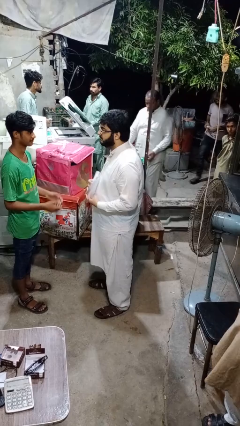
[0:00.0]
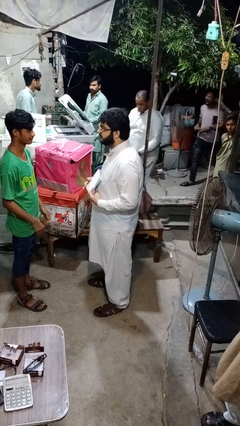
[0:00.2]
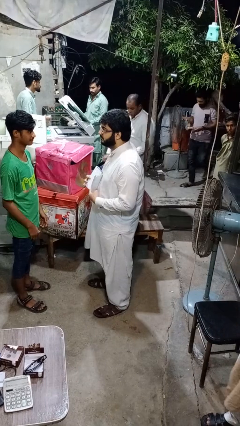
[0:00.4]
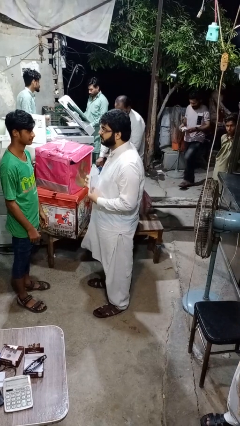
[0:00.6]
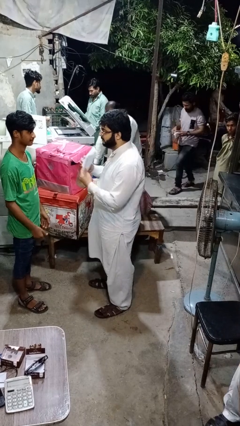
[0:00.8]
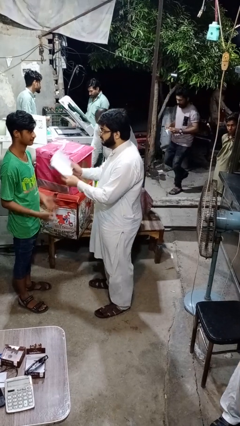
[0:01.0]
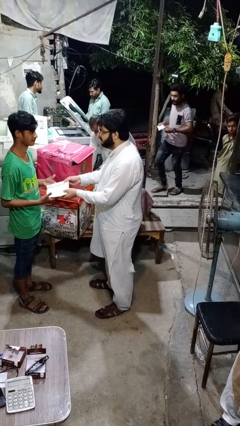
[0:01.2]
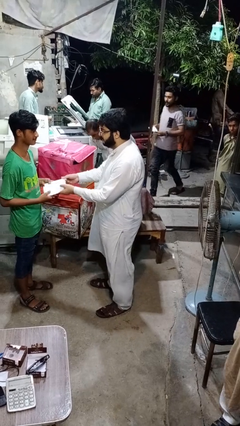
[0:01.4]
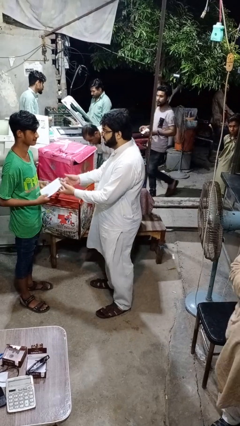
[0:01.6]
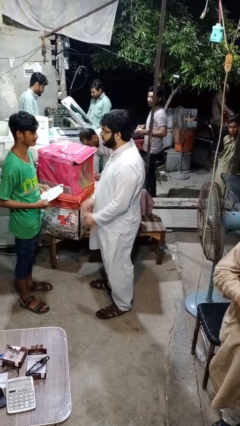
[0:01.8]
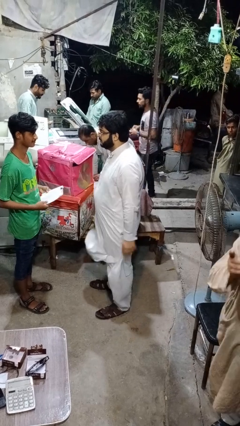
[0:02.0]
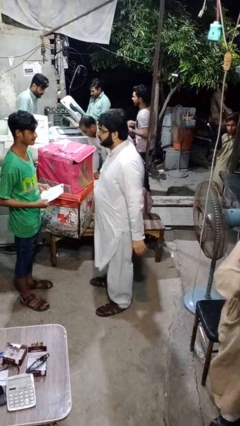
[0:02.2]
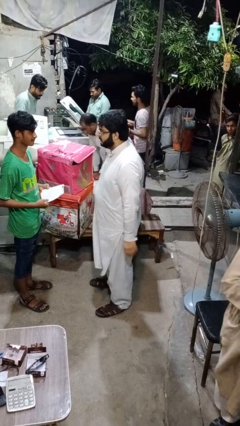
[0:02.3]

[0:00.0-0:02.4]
person transfers object to person

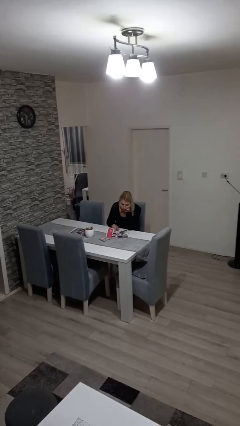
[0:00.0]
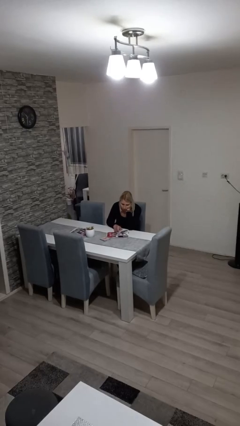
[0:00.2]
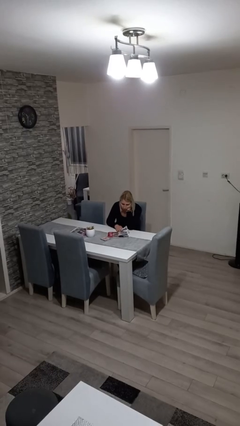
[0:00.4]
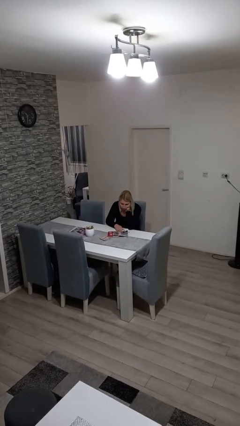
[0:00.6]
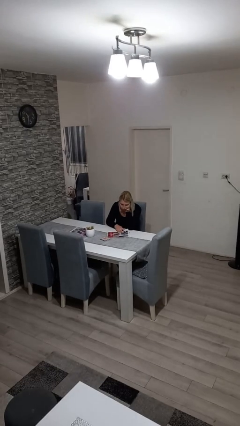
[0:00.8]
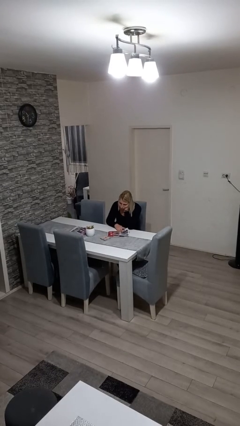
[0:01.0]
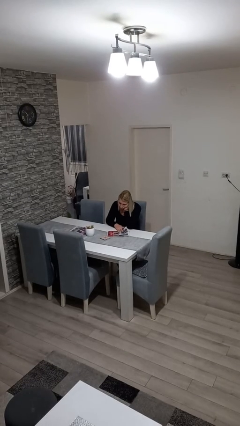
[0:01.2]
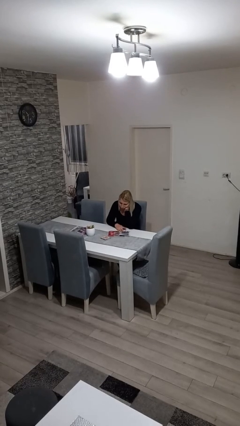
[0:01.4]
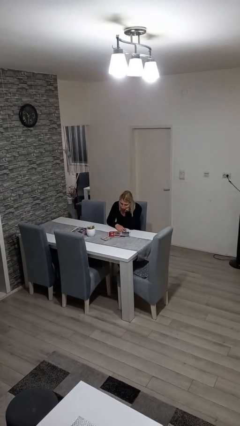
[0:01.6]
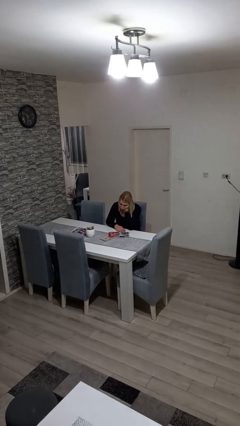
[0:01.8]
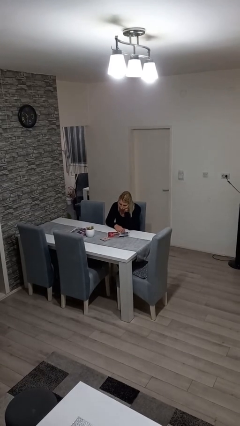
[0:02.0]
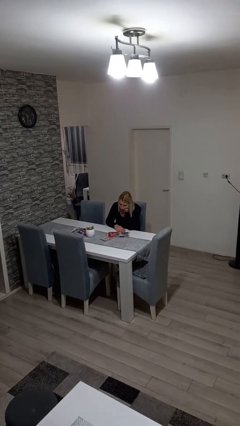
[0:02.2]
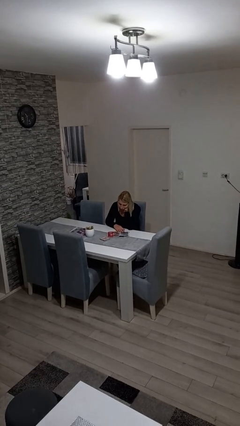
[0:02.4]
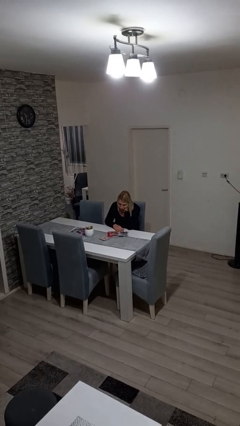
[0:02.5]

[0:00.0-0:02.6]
person reads magazine

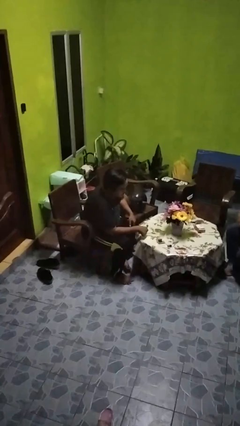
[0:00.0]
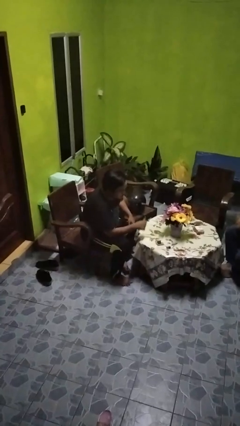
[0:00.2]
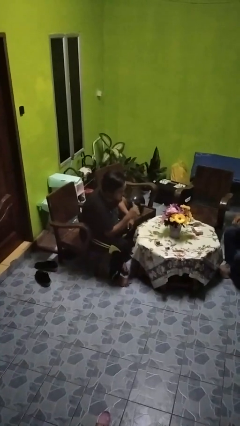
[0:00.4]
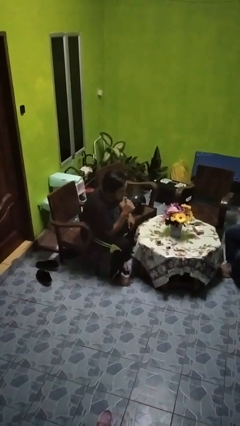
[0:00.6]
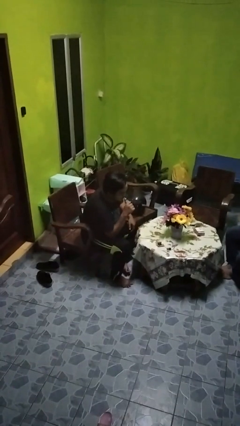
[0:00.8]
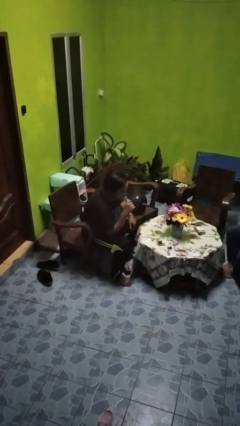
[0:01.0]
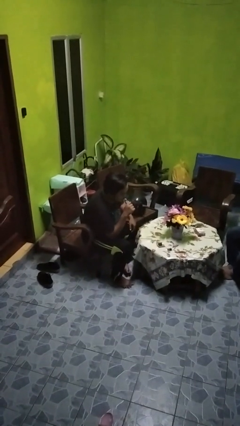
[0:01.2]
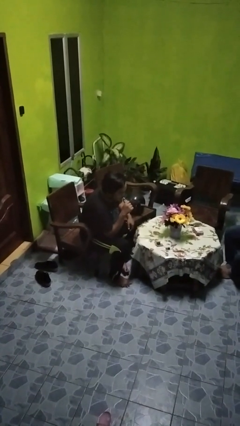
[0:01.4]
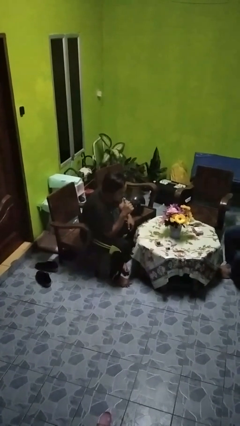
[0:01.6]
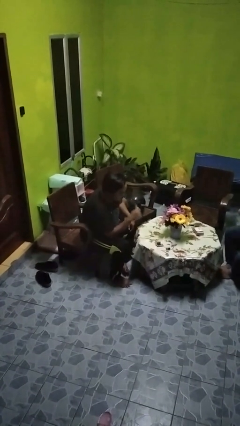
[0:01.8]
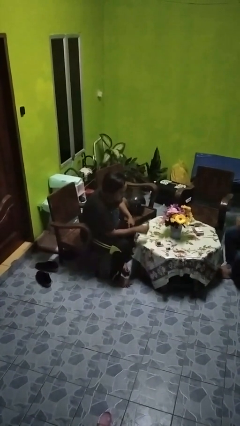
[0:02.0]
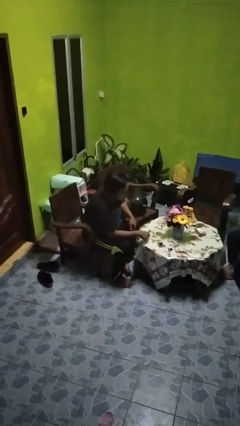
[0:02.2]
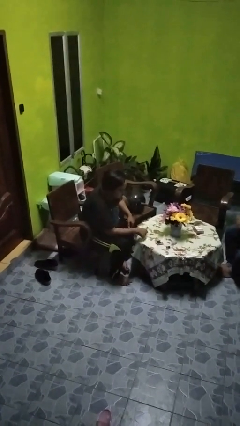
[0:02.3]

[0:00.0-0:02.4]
person vapes

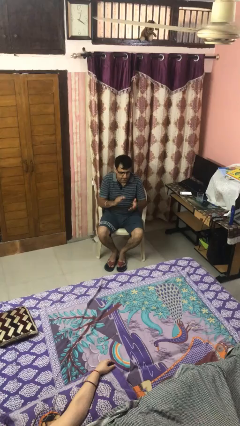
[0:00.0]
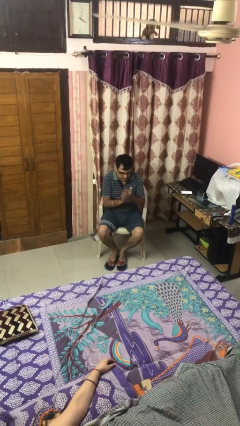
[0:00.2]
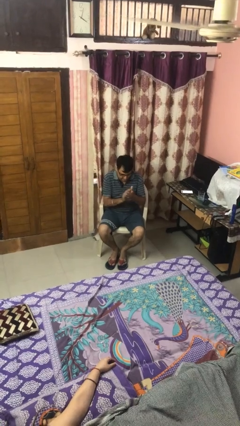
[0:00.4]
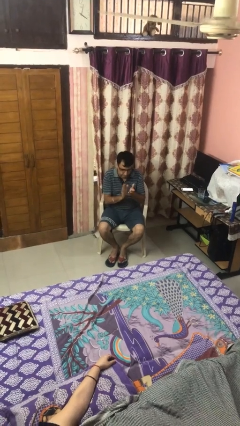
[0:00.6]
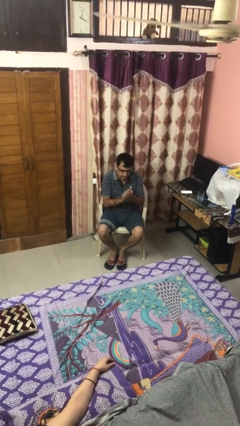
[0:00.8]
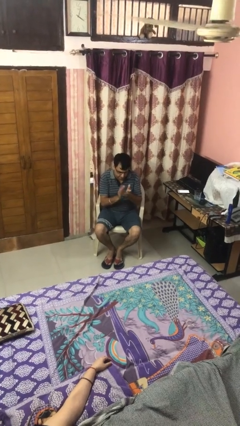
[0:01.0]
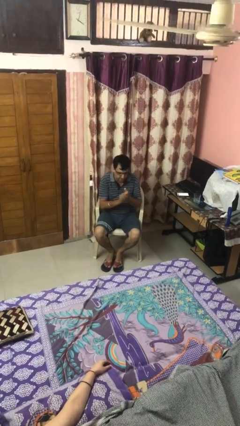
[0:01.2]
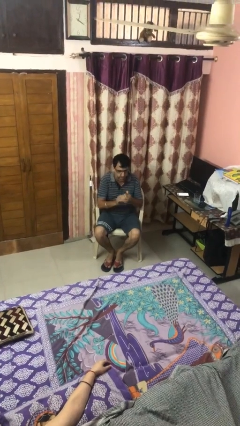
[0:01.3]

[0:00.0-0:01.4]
person claps hands

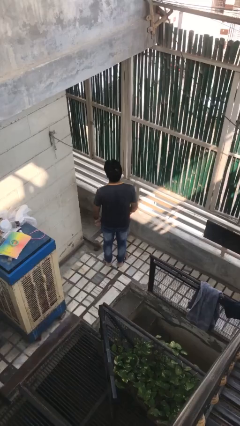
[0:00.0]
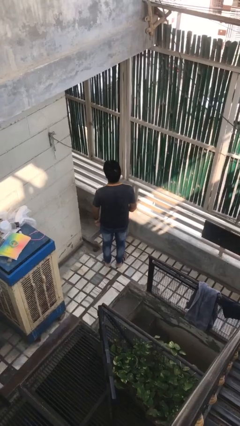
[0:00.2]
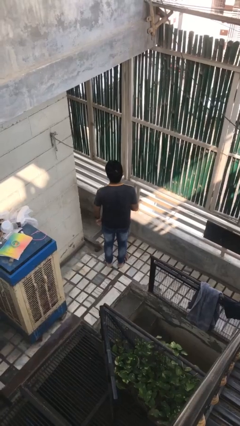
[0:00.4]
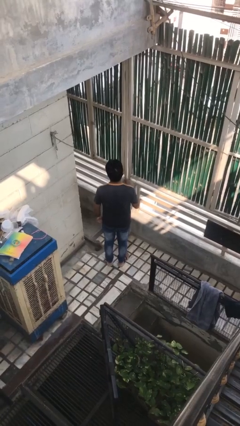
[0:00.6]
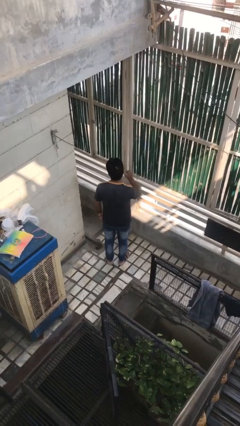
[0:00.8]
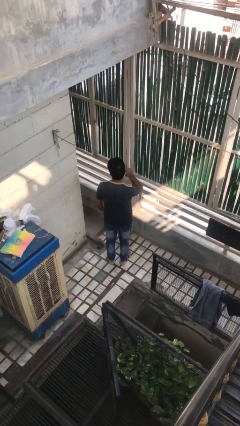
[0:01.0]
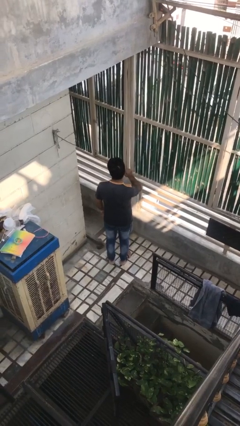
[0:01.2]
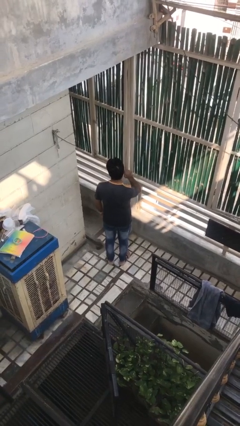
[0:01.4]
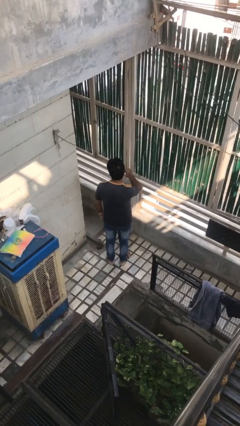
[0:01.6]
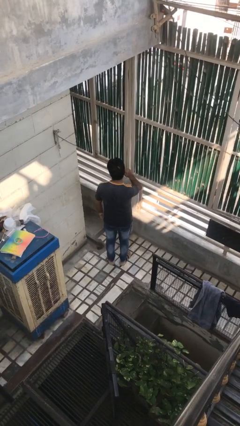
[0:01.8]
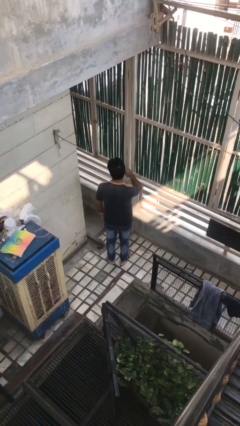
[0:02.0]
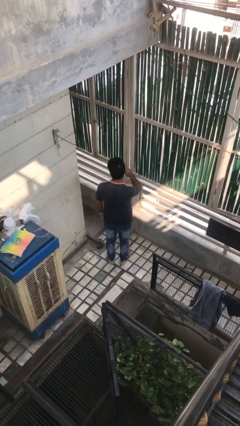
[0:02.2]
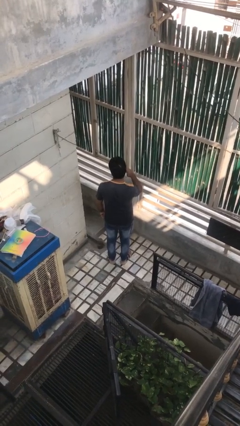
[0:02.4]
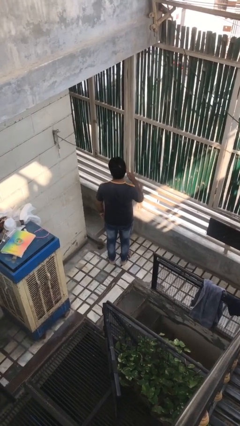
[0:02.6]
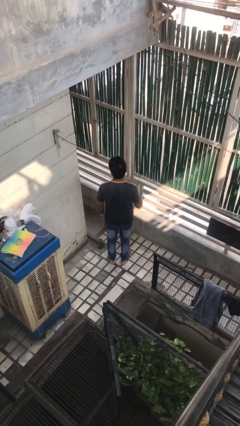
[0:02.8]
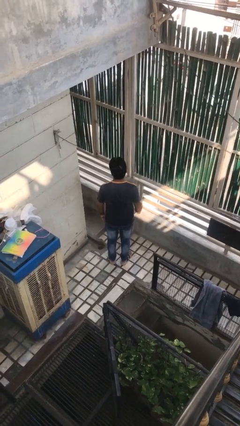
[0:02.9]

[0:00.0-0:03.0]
person touches earlobe

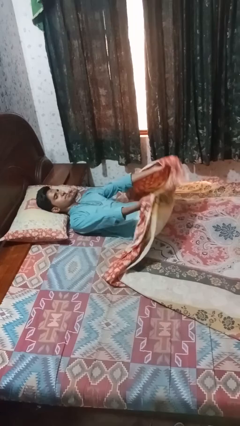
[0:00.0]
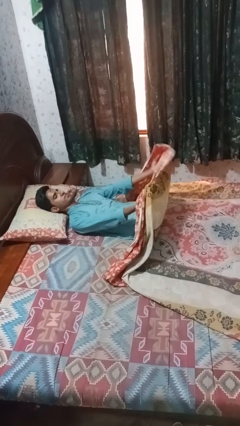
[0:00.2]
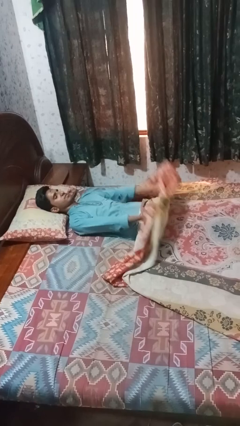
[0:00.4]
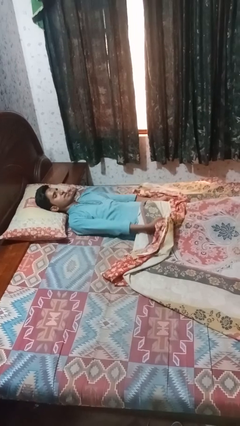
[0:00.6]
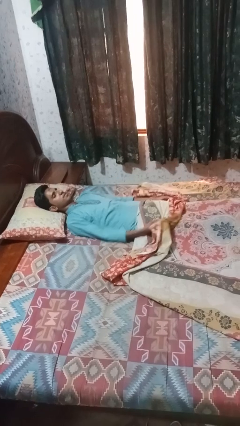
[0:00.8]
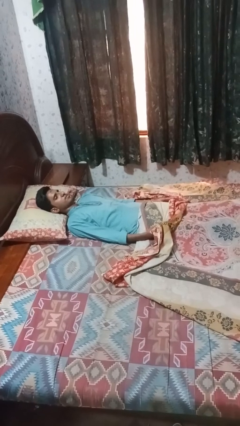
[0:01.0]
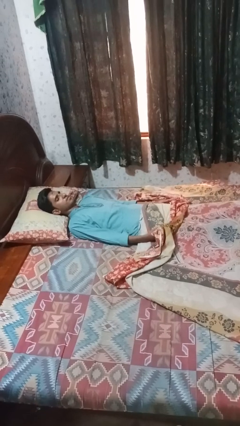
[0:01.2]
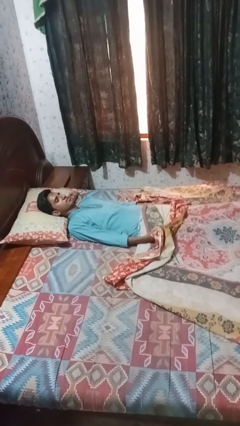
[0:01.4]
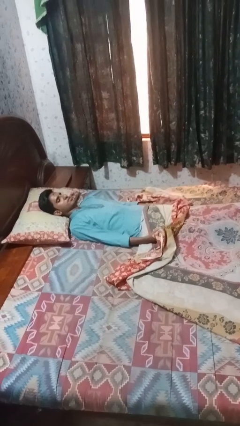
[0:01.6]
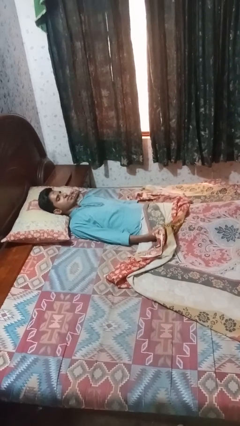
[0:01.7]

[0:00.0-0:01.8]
person uncovers with bedsheets

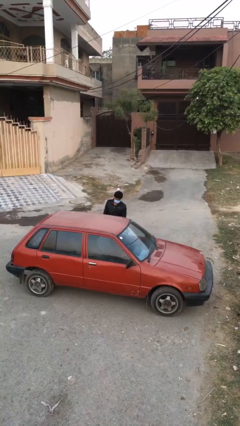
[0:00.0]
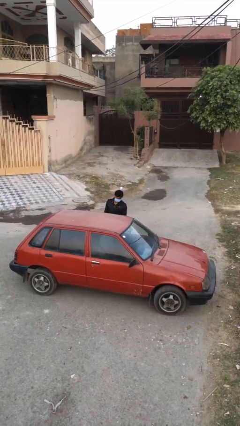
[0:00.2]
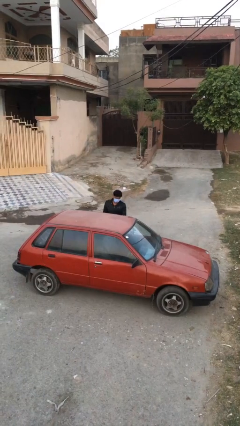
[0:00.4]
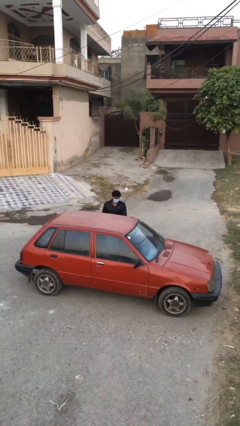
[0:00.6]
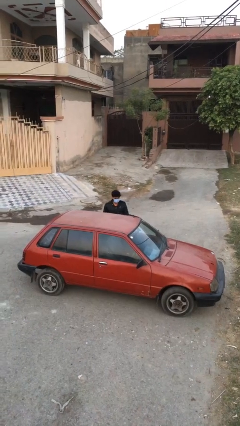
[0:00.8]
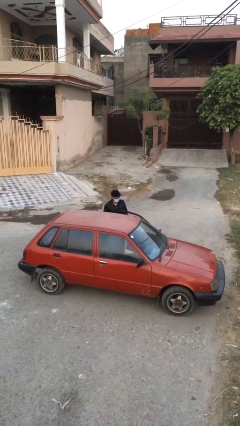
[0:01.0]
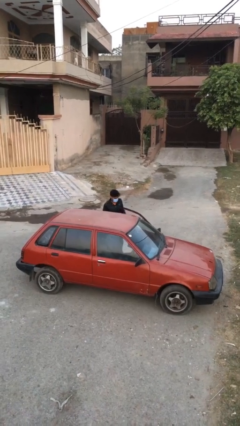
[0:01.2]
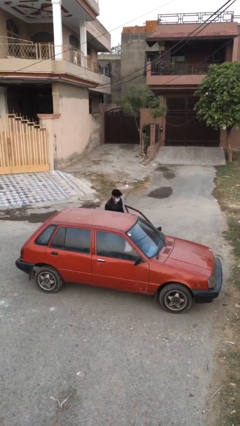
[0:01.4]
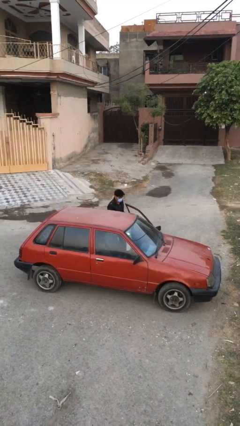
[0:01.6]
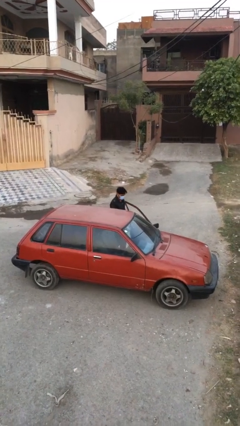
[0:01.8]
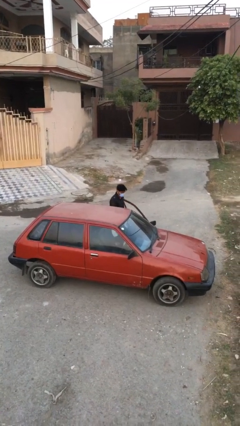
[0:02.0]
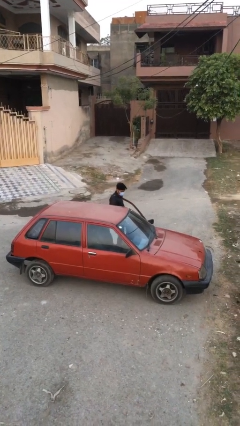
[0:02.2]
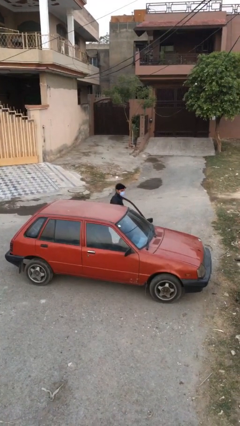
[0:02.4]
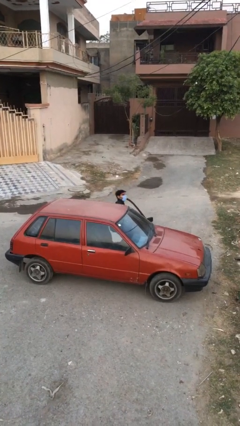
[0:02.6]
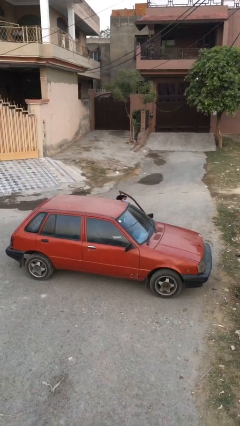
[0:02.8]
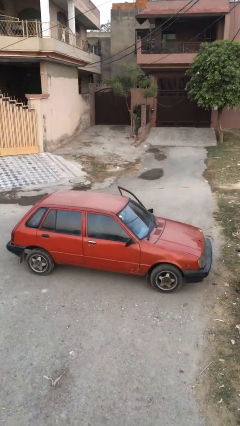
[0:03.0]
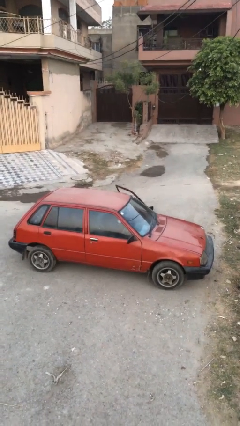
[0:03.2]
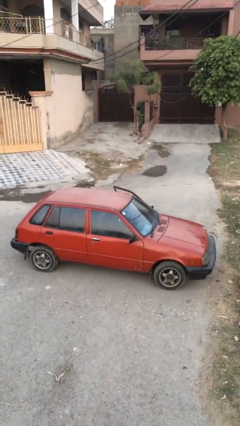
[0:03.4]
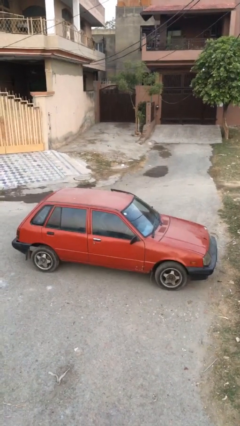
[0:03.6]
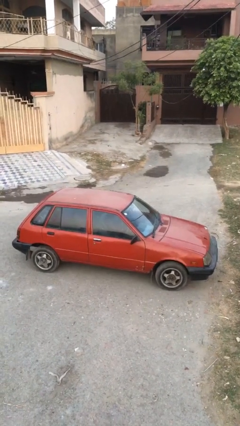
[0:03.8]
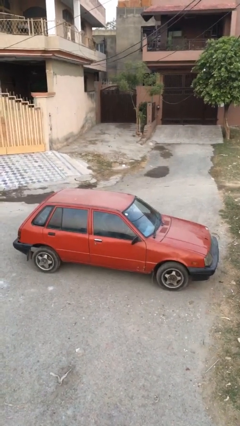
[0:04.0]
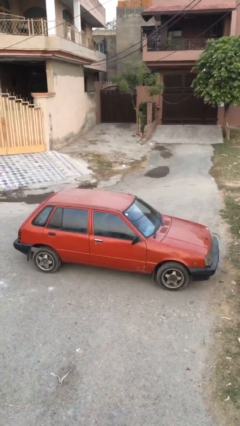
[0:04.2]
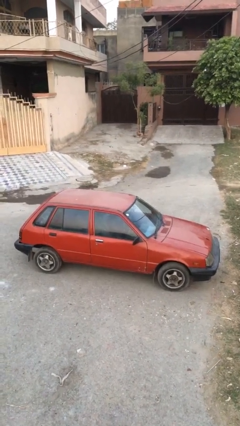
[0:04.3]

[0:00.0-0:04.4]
person enters car
